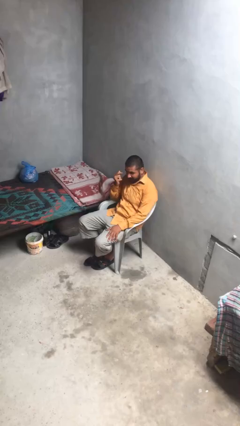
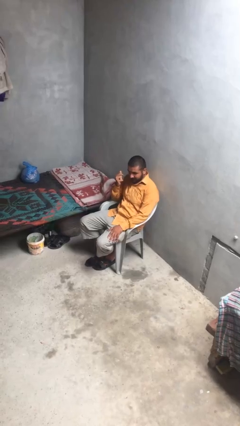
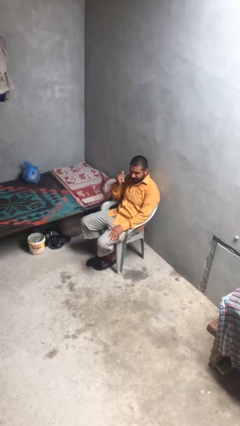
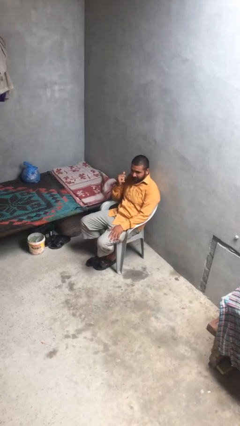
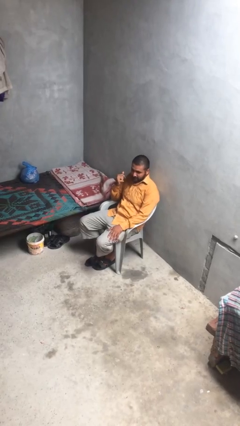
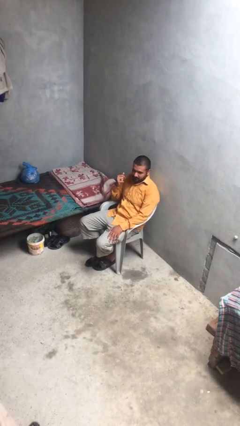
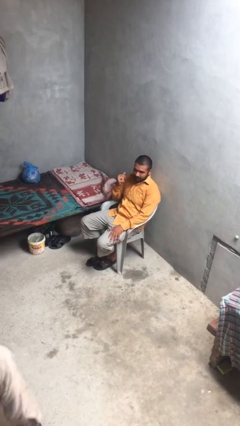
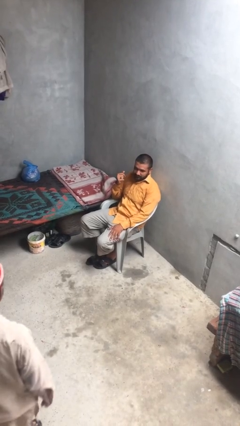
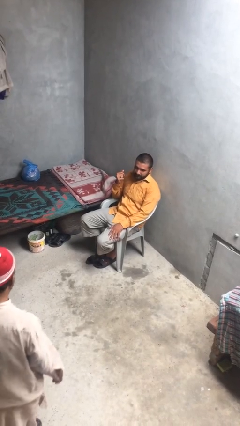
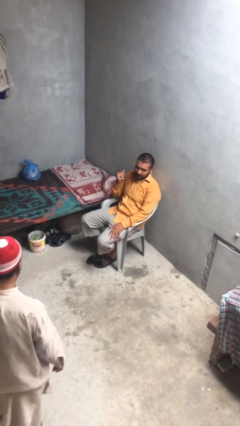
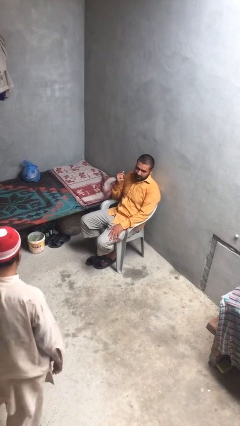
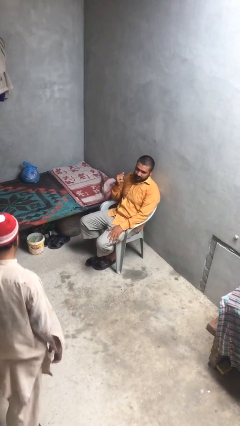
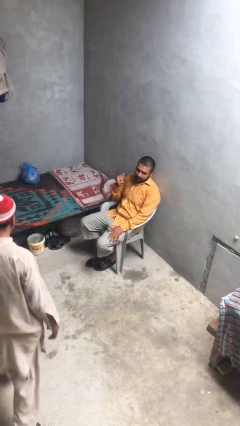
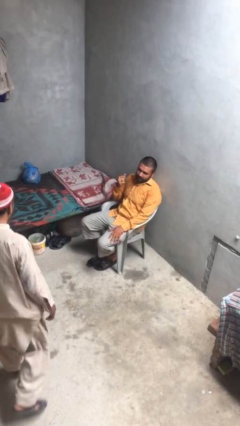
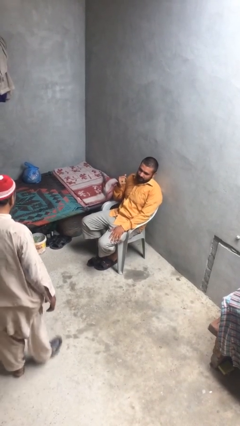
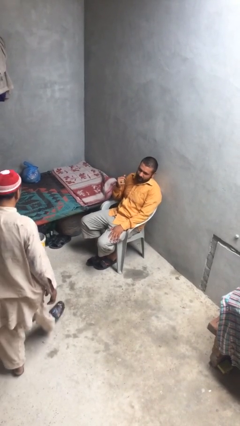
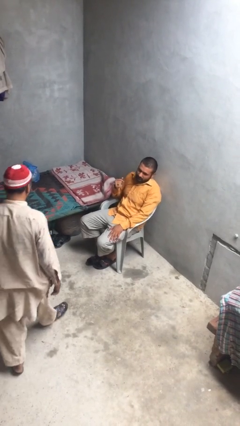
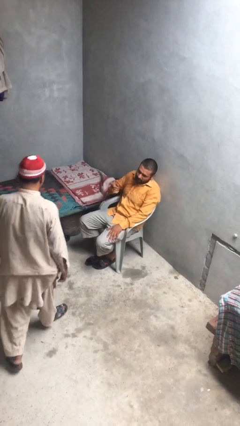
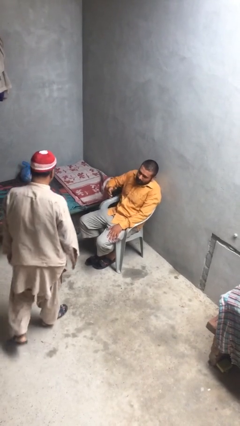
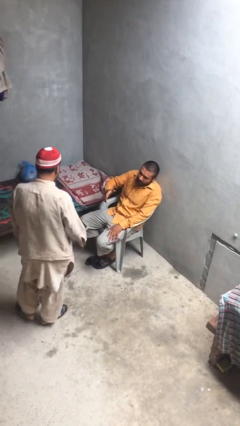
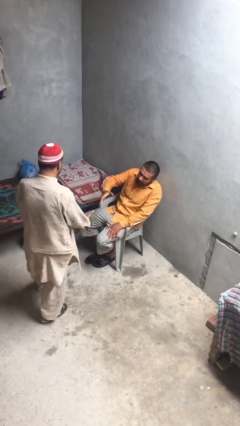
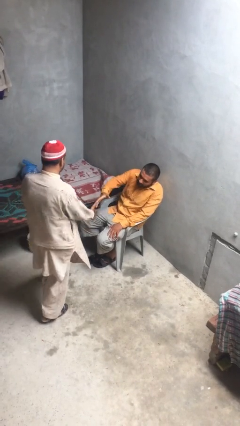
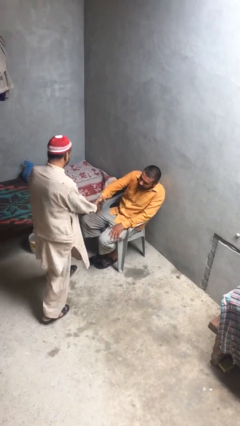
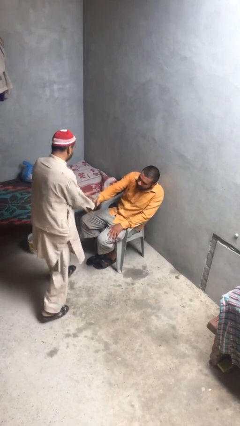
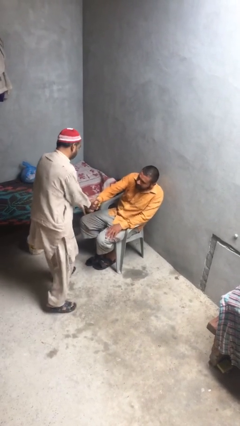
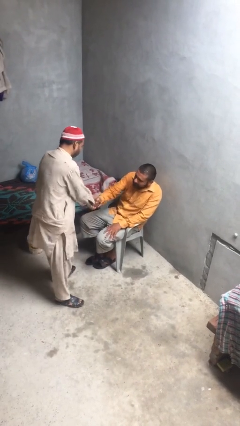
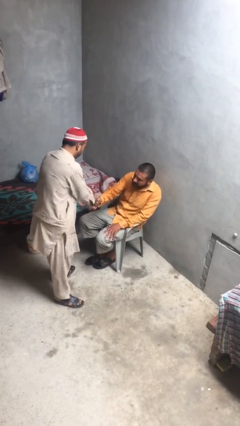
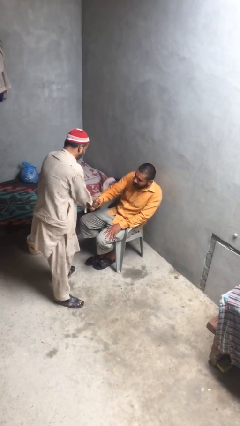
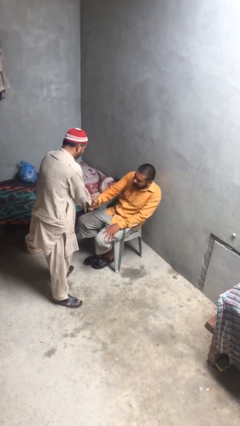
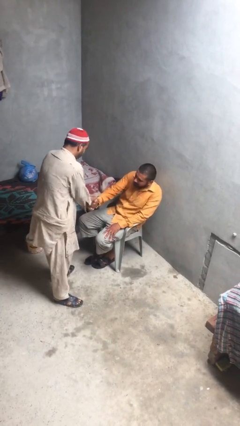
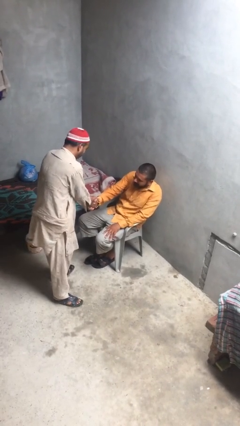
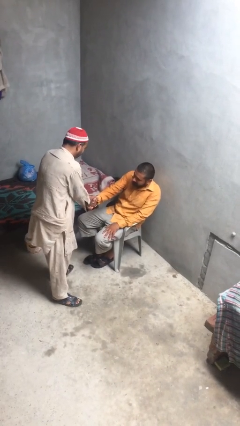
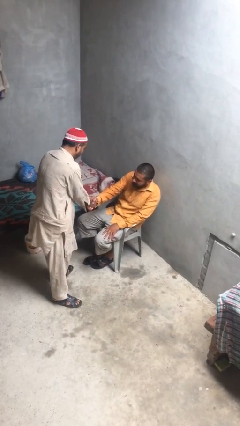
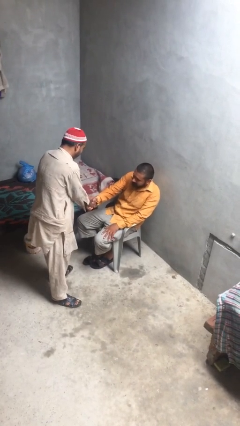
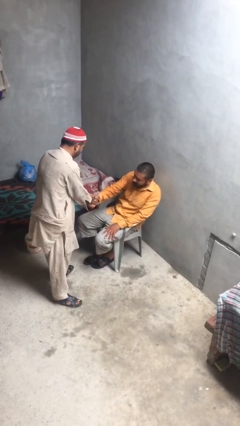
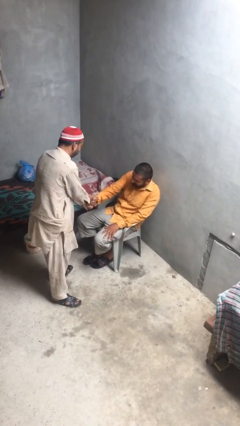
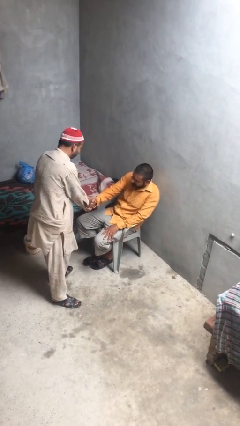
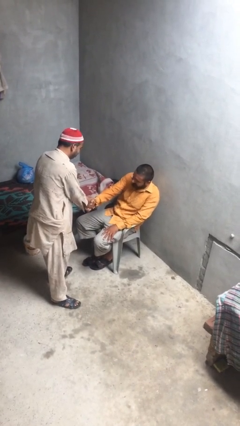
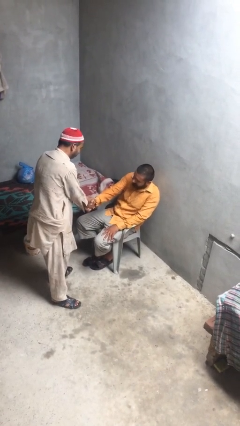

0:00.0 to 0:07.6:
person shakes hand

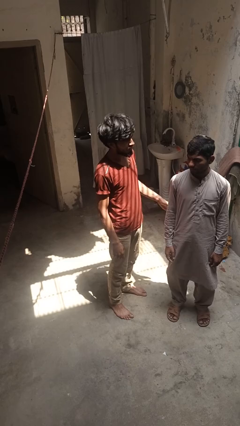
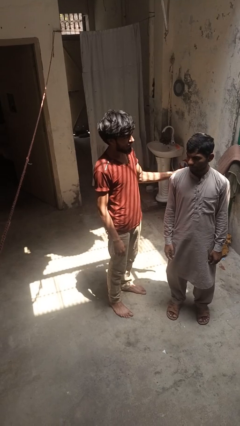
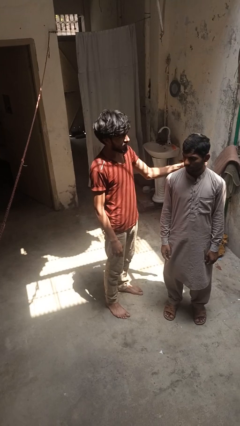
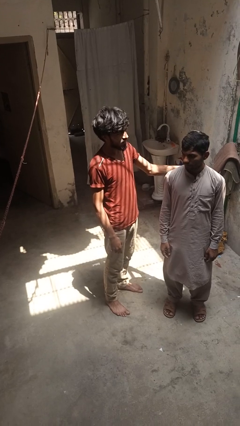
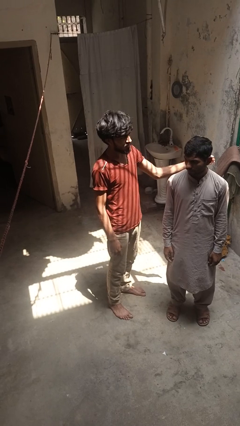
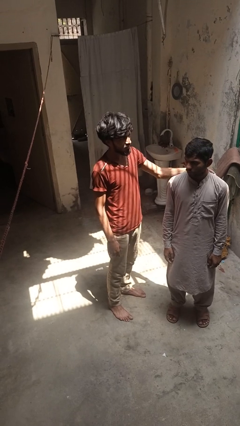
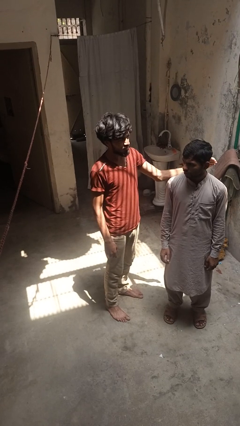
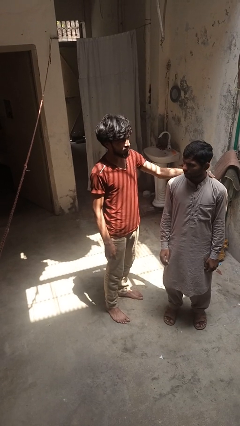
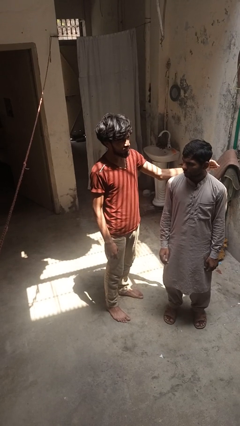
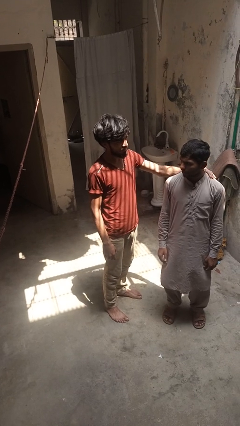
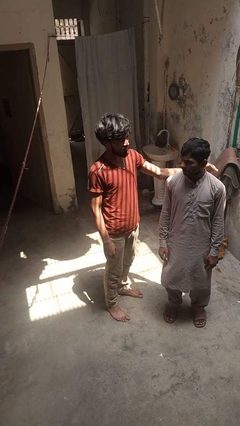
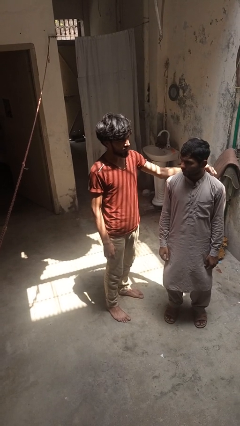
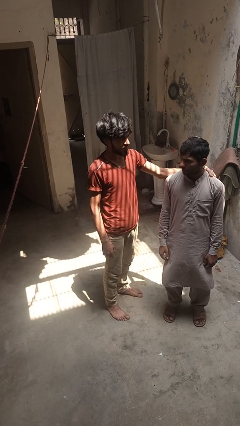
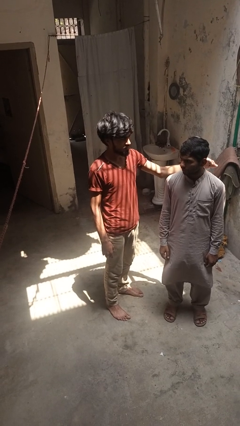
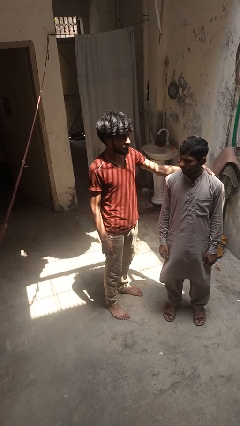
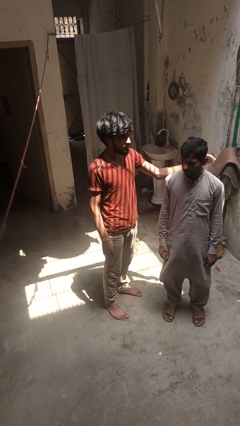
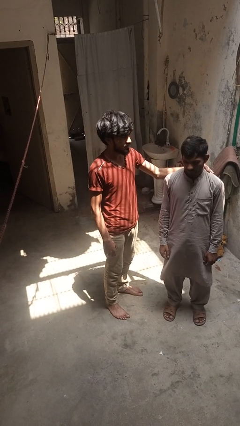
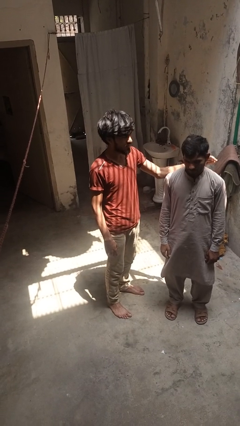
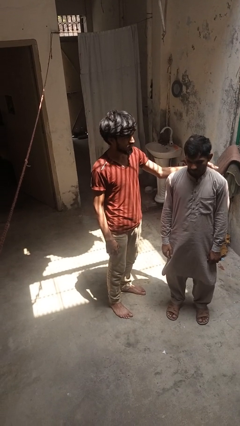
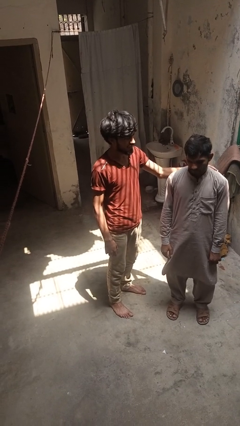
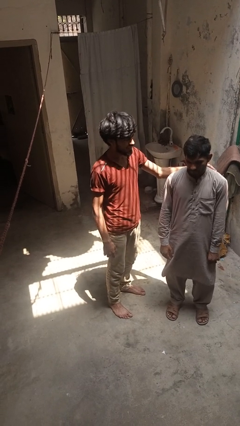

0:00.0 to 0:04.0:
person pounds shoulders of person

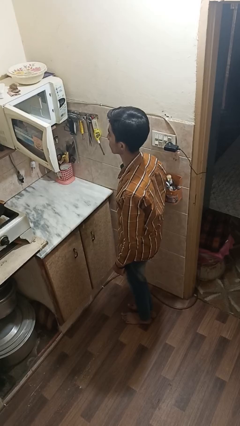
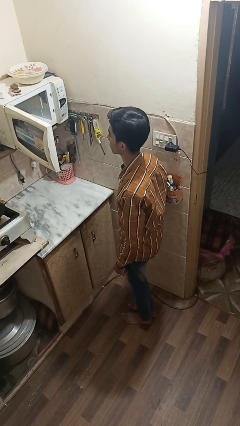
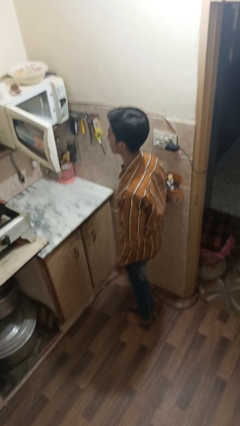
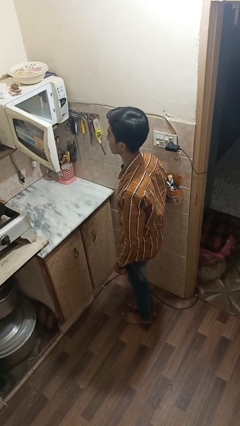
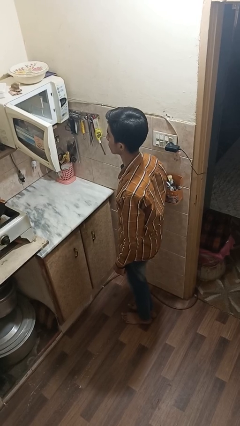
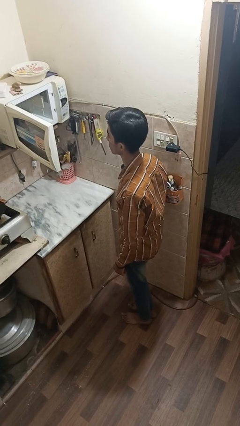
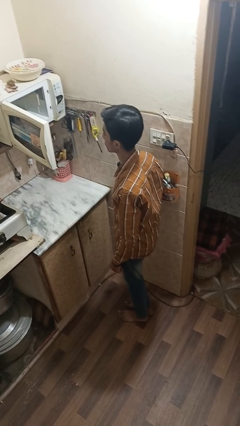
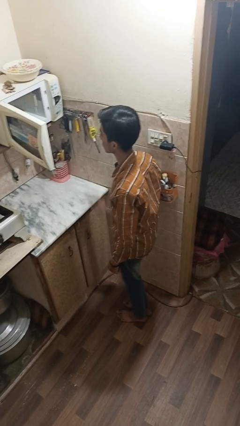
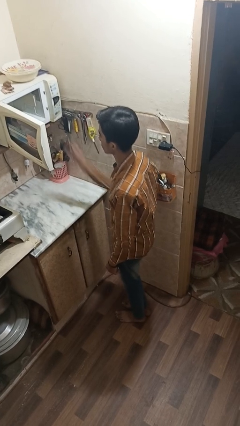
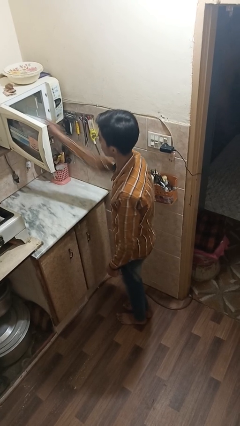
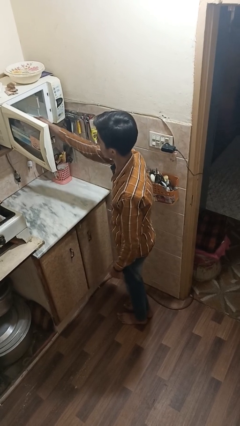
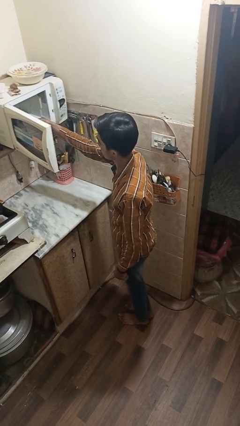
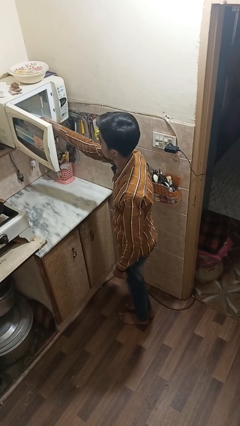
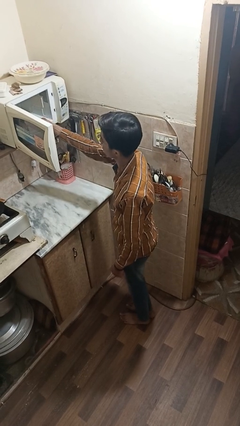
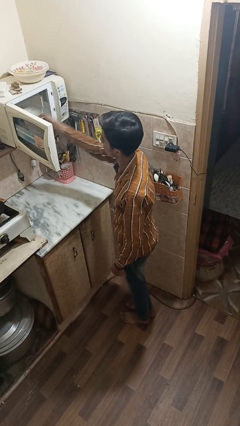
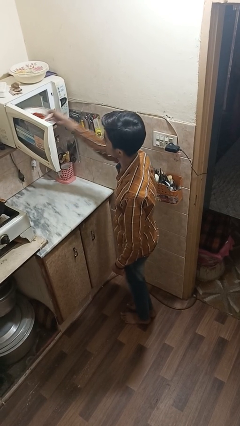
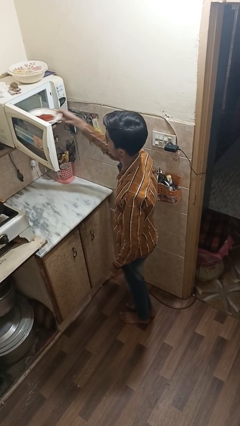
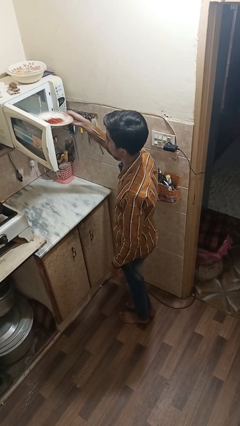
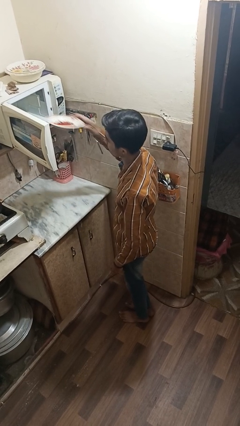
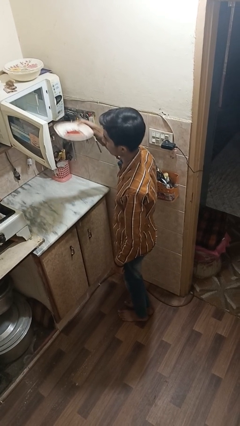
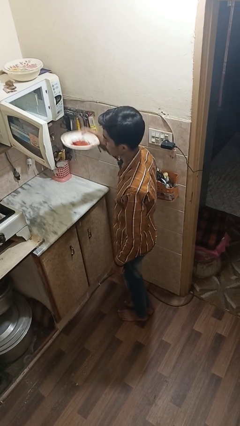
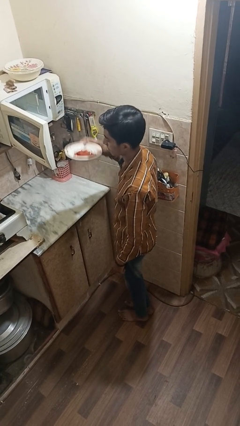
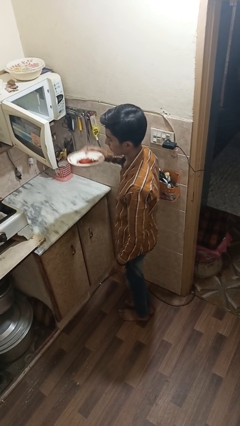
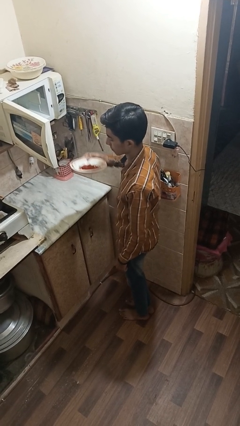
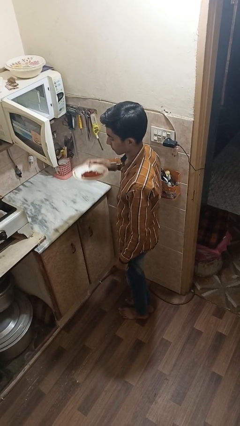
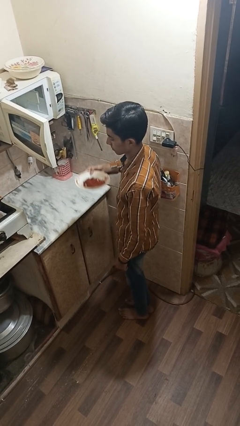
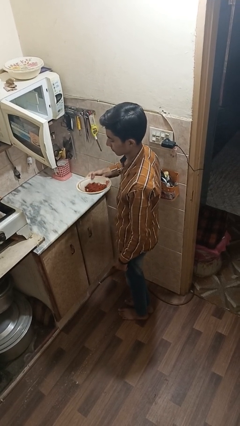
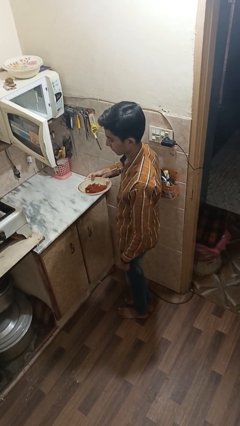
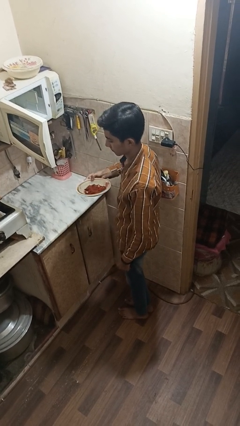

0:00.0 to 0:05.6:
person takes object from microwave

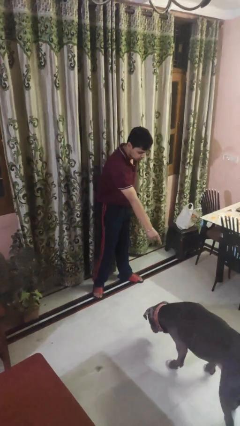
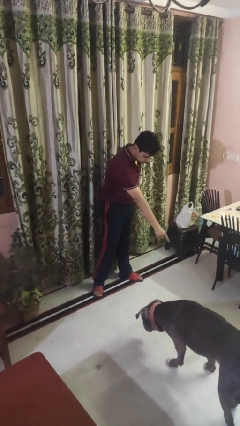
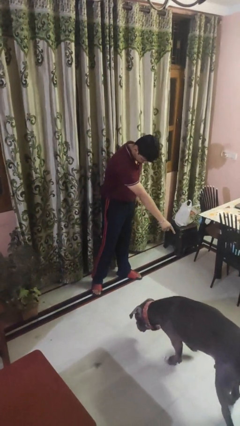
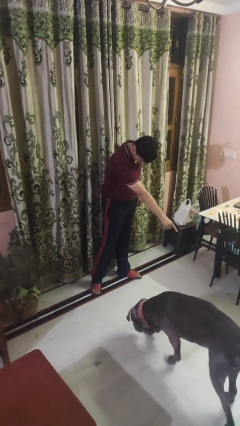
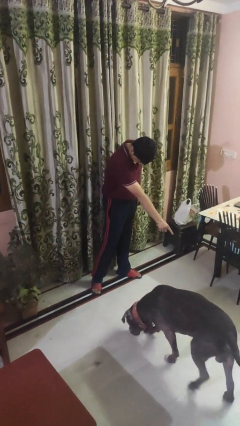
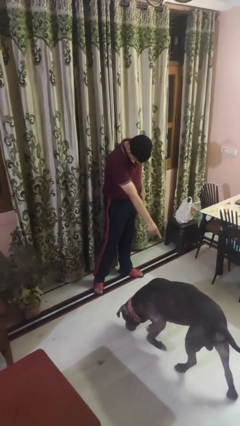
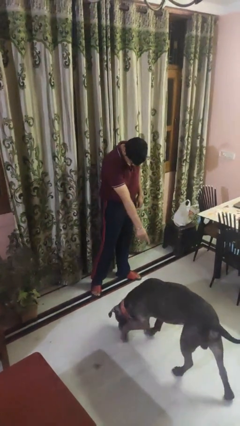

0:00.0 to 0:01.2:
person points to dog
